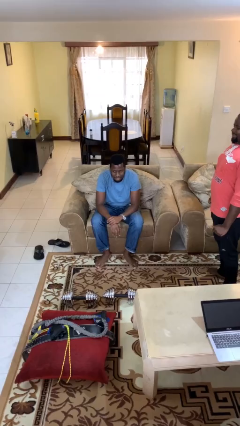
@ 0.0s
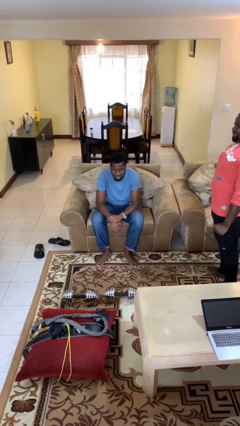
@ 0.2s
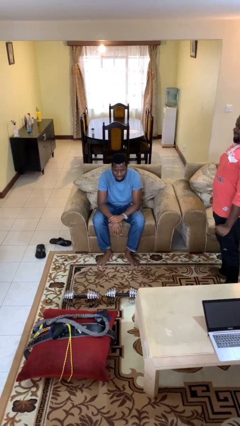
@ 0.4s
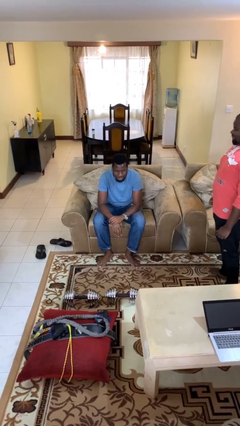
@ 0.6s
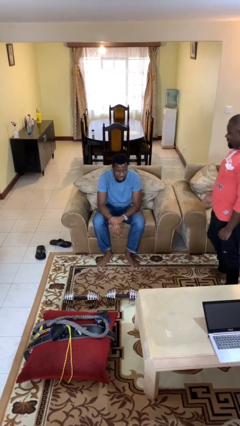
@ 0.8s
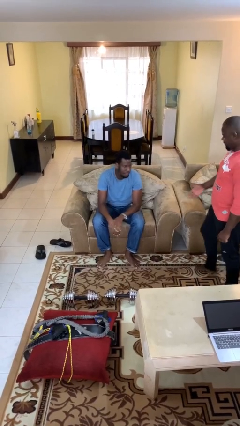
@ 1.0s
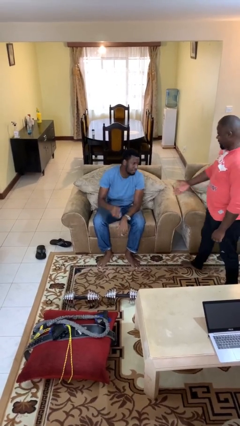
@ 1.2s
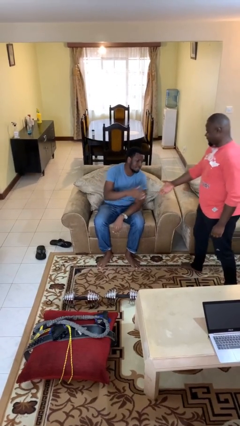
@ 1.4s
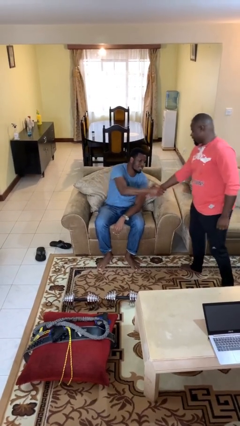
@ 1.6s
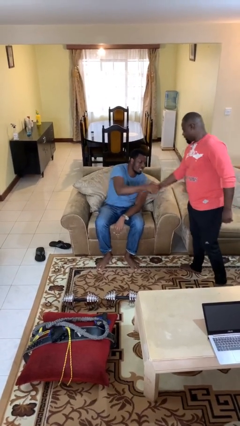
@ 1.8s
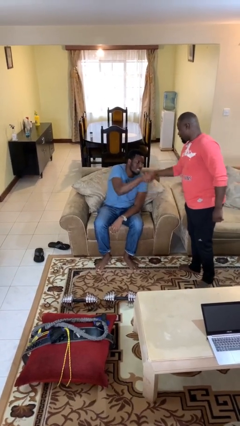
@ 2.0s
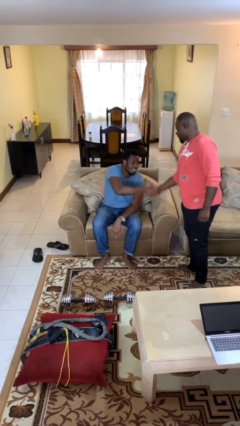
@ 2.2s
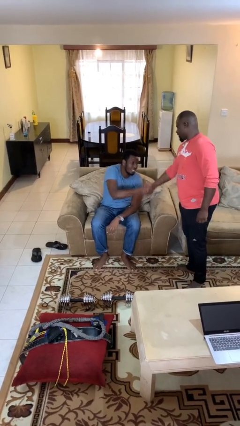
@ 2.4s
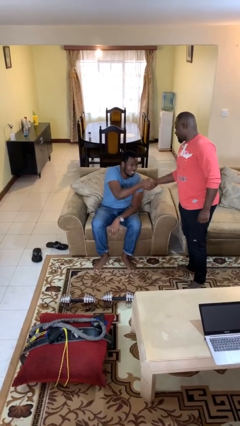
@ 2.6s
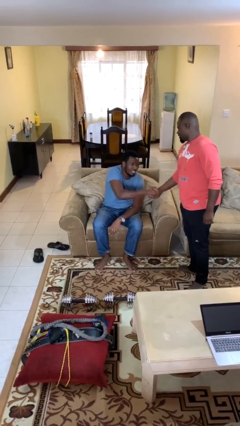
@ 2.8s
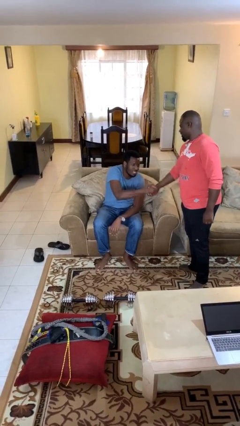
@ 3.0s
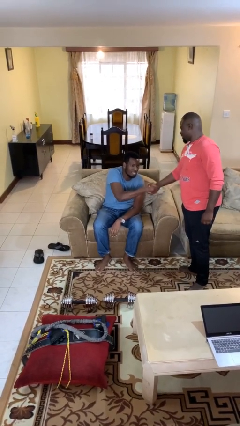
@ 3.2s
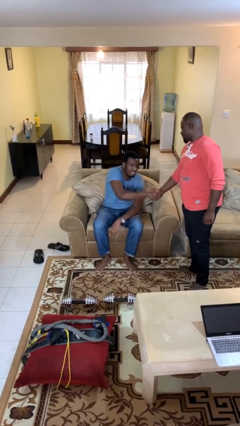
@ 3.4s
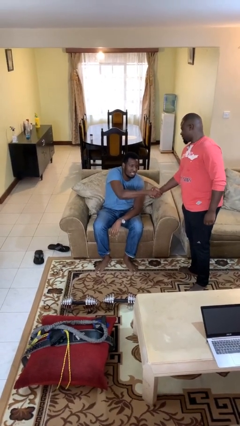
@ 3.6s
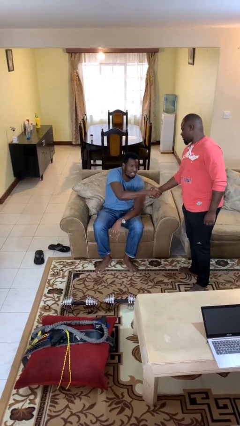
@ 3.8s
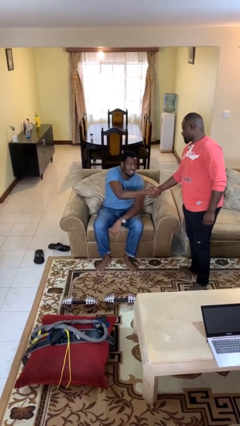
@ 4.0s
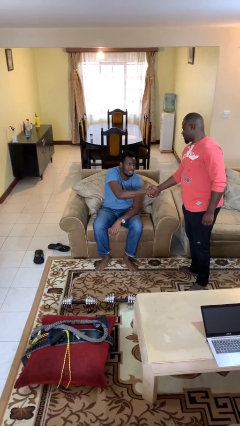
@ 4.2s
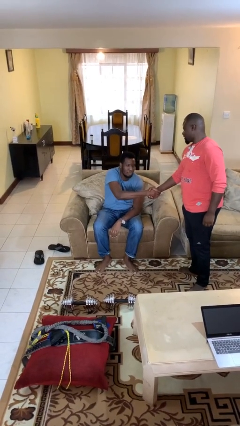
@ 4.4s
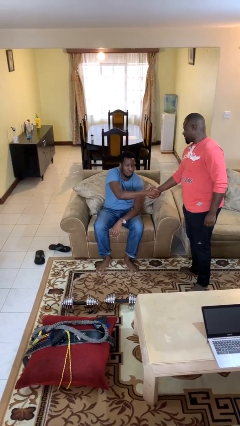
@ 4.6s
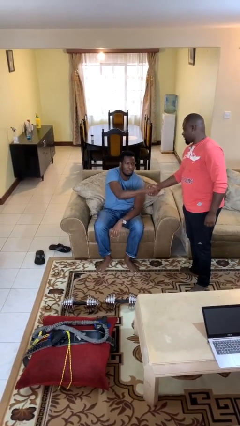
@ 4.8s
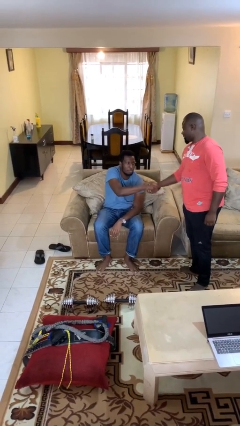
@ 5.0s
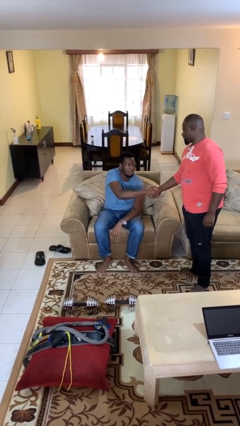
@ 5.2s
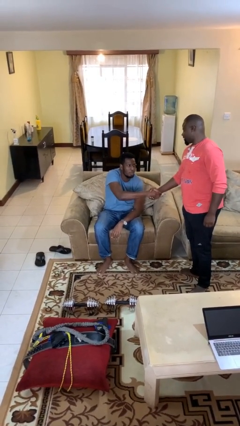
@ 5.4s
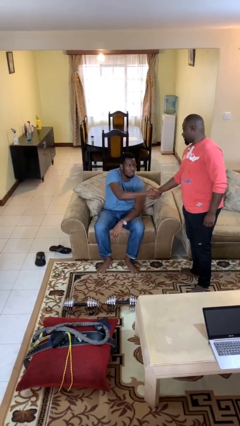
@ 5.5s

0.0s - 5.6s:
person shakes hand

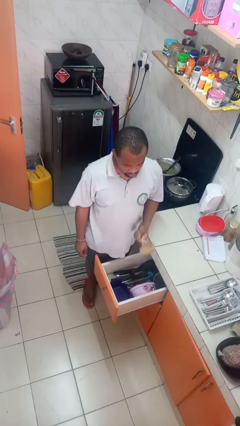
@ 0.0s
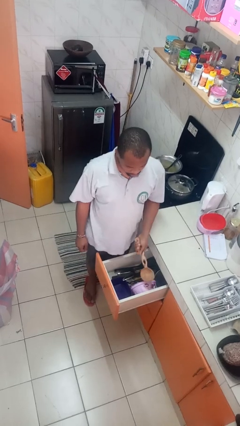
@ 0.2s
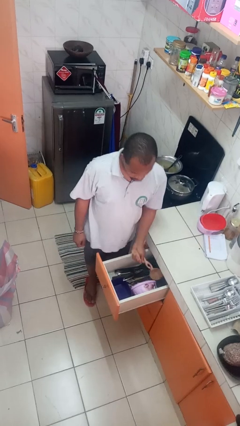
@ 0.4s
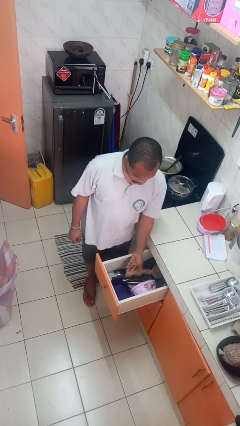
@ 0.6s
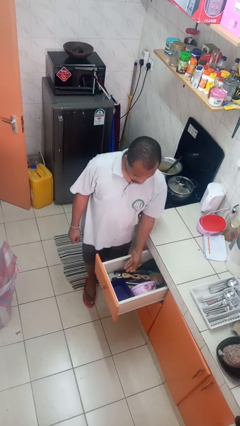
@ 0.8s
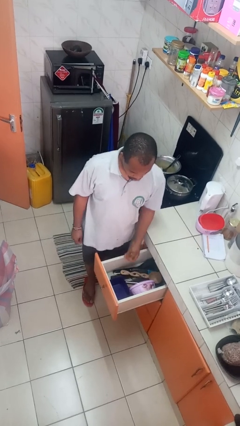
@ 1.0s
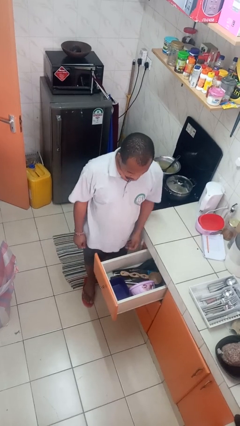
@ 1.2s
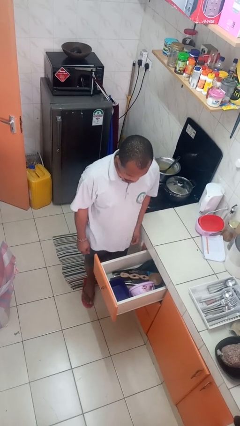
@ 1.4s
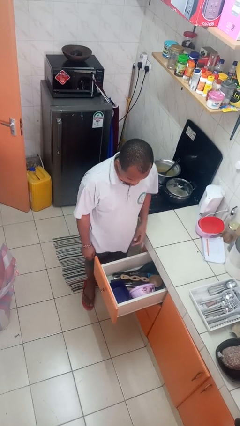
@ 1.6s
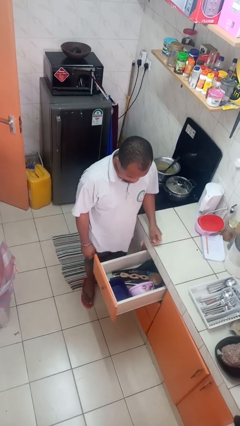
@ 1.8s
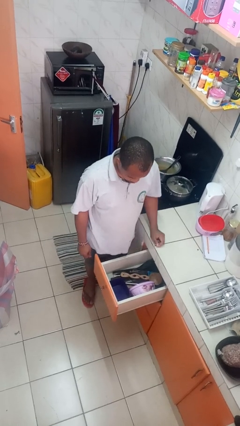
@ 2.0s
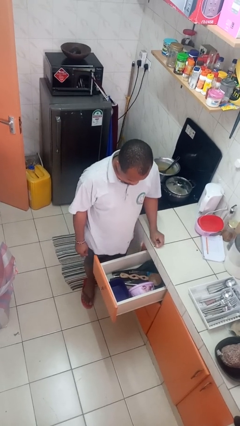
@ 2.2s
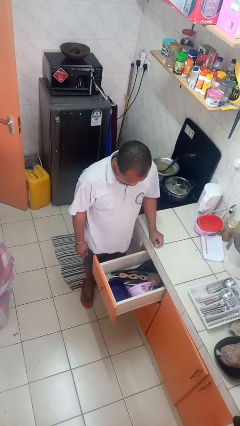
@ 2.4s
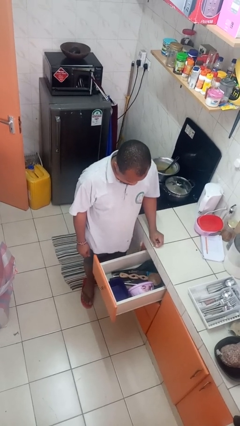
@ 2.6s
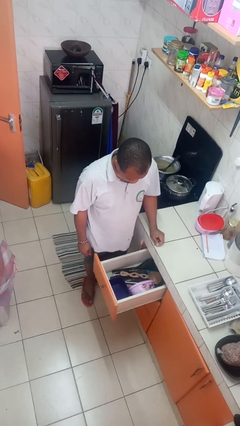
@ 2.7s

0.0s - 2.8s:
person puts object into kitchen drawer

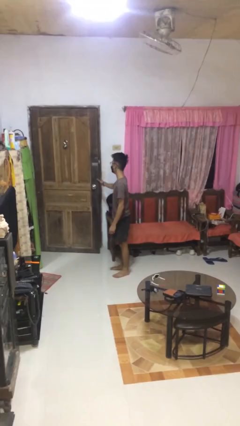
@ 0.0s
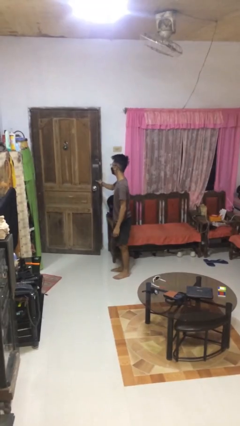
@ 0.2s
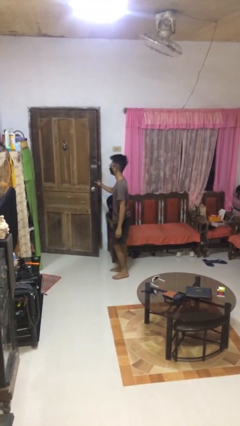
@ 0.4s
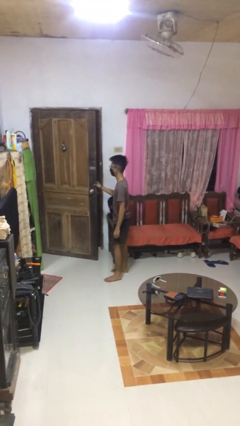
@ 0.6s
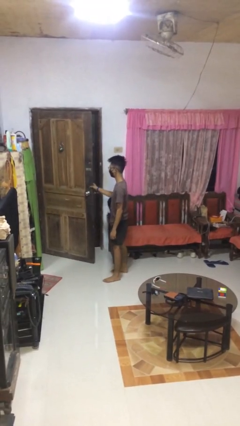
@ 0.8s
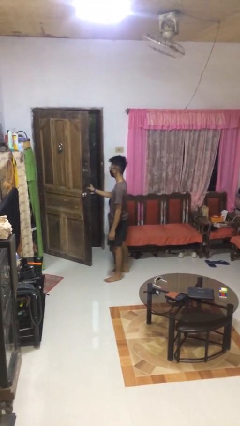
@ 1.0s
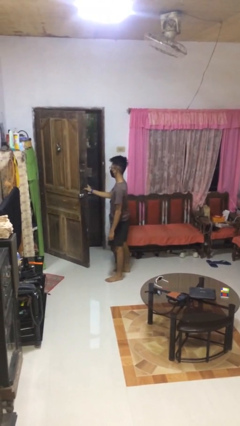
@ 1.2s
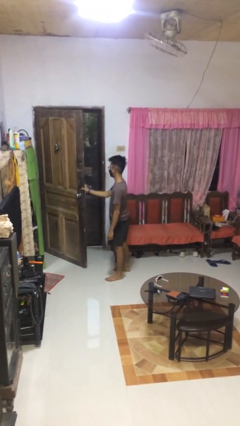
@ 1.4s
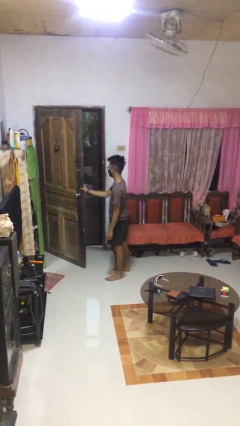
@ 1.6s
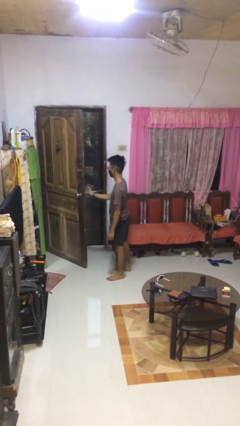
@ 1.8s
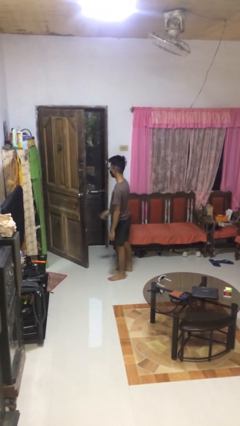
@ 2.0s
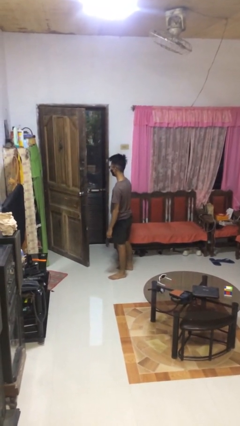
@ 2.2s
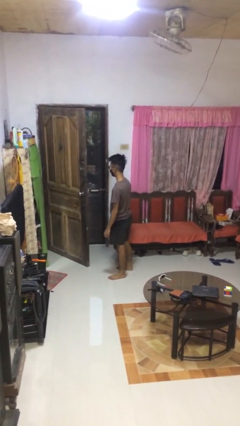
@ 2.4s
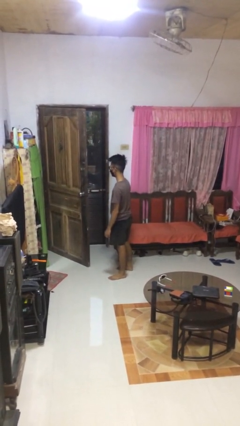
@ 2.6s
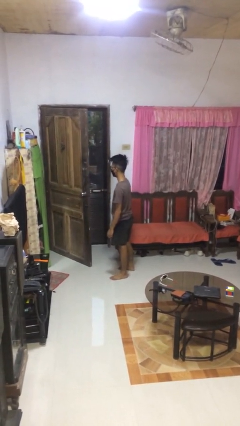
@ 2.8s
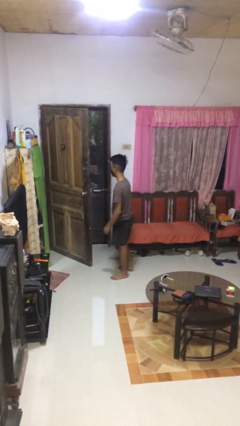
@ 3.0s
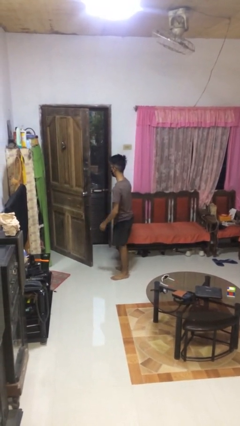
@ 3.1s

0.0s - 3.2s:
person opens facility door

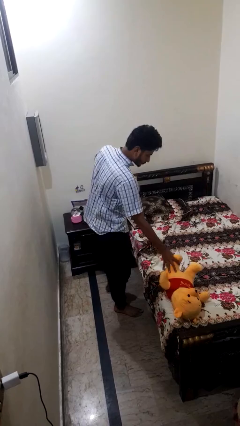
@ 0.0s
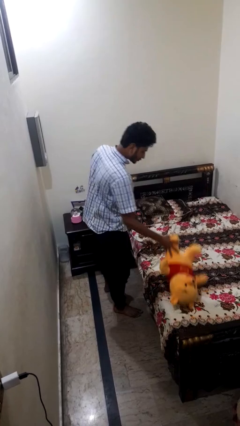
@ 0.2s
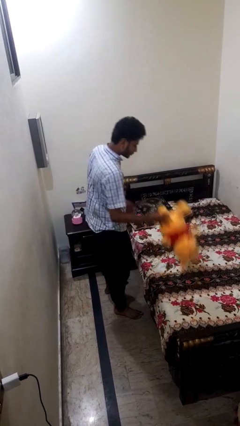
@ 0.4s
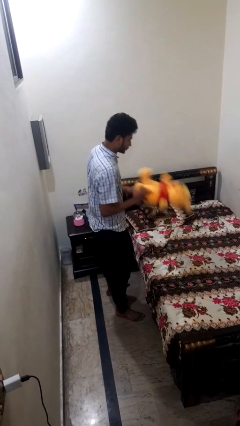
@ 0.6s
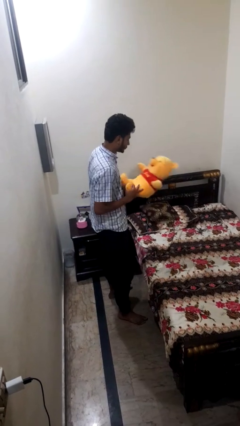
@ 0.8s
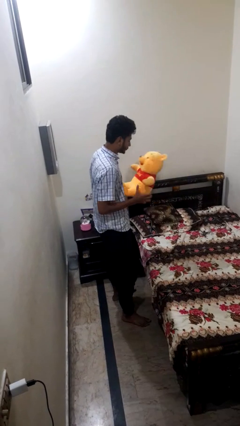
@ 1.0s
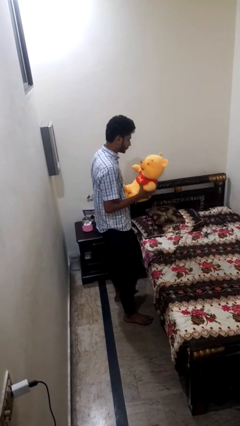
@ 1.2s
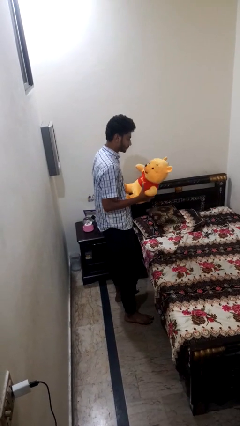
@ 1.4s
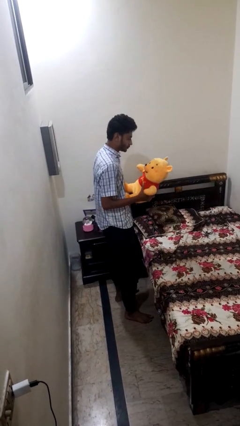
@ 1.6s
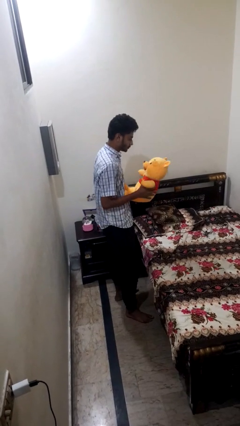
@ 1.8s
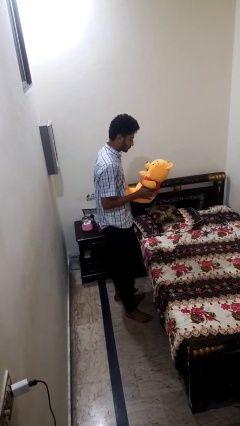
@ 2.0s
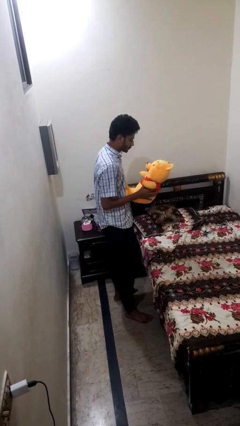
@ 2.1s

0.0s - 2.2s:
person picks up object from bed

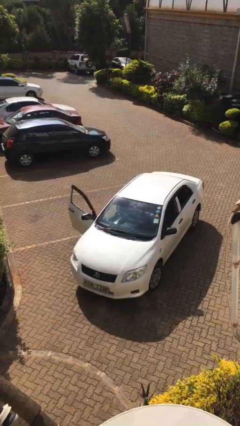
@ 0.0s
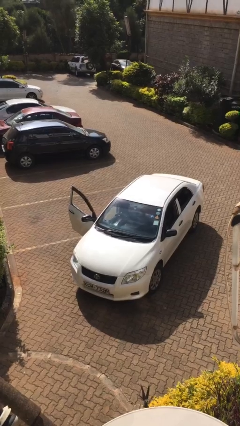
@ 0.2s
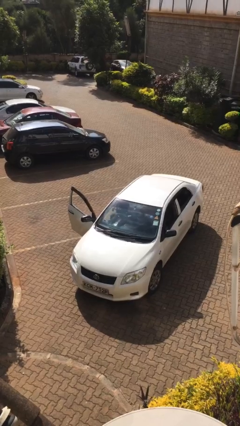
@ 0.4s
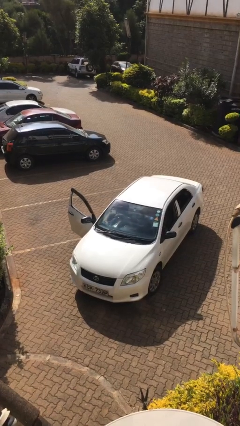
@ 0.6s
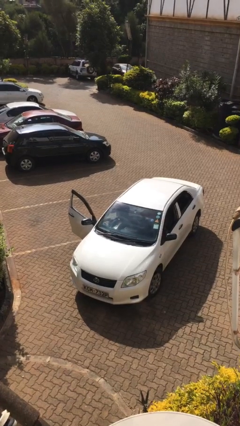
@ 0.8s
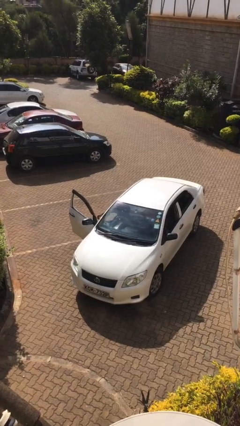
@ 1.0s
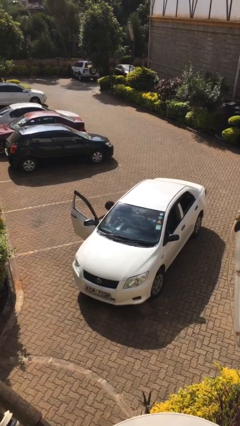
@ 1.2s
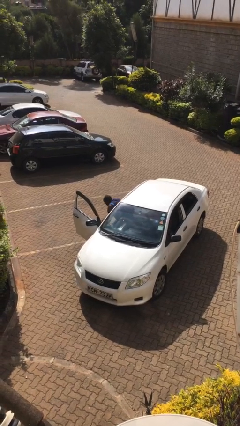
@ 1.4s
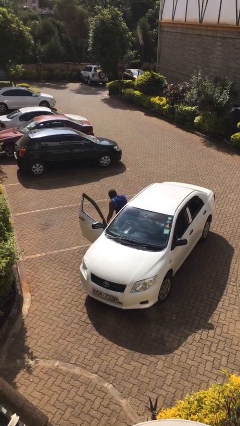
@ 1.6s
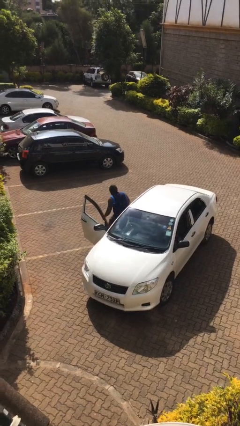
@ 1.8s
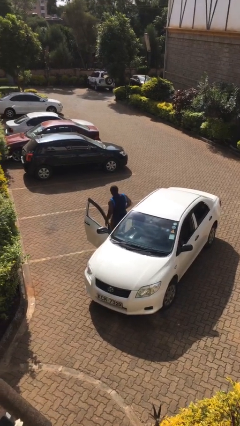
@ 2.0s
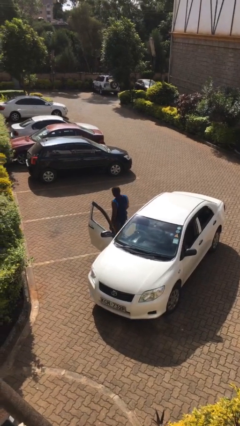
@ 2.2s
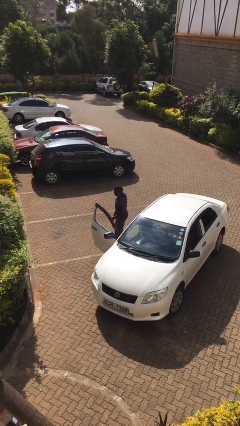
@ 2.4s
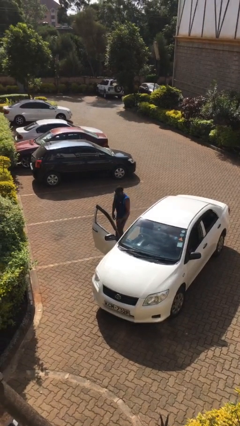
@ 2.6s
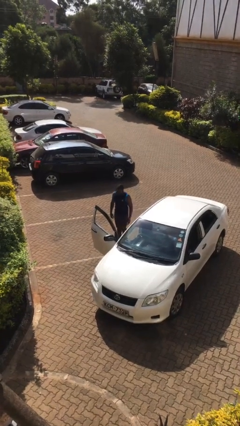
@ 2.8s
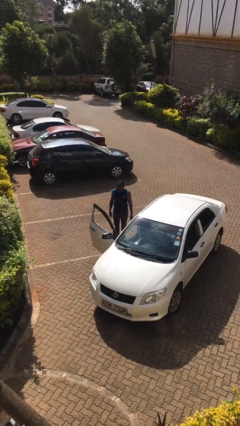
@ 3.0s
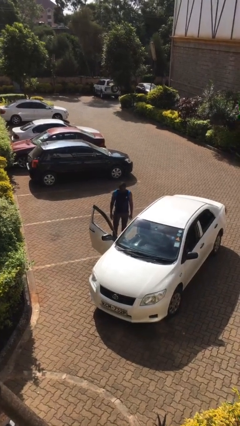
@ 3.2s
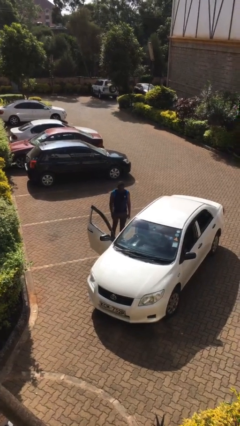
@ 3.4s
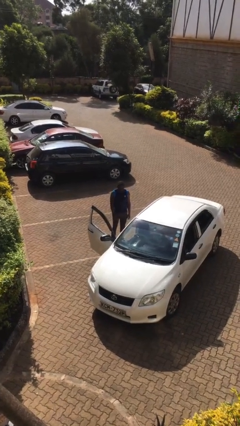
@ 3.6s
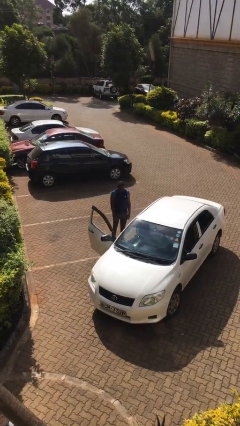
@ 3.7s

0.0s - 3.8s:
person exits car

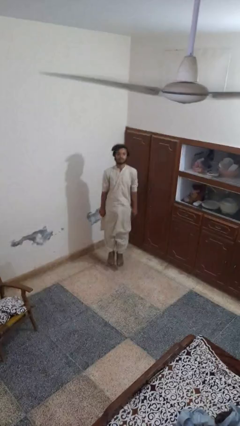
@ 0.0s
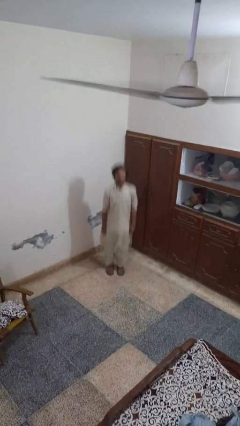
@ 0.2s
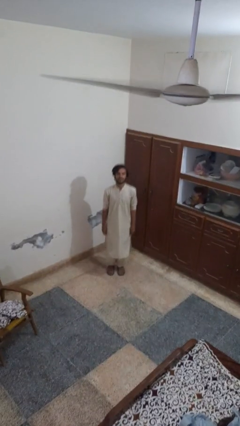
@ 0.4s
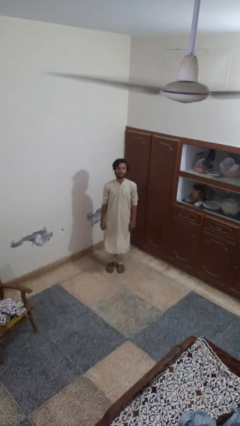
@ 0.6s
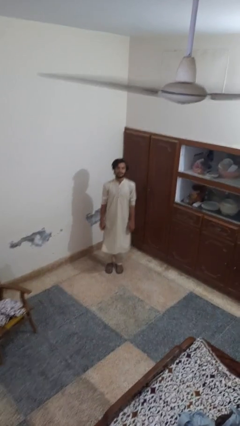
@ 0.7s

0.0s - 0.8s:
person jumps
